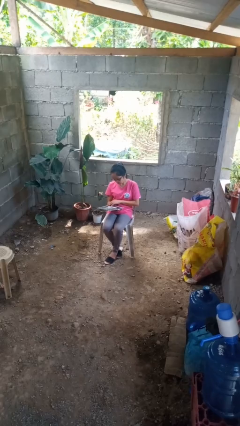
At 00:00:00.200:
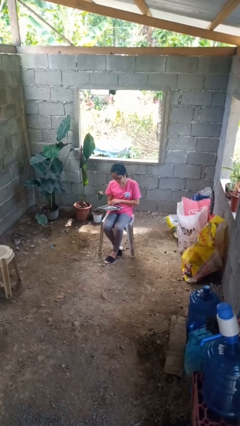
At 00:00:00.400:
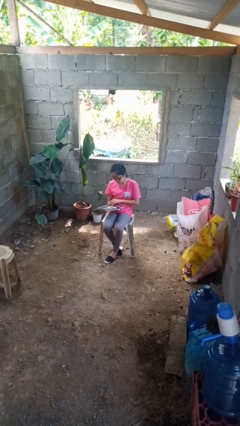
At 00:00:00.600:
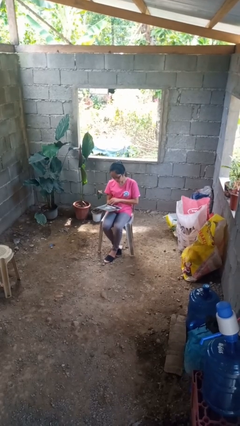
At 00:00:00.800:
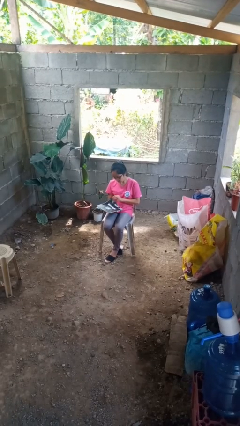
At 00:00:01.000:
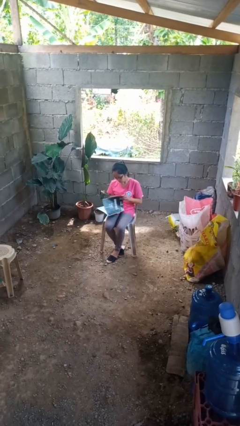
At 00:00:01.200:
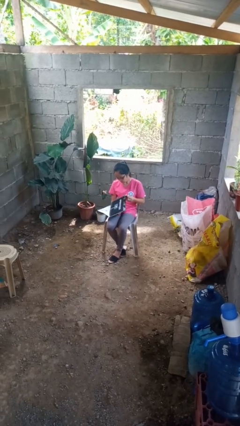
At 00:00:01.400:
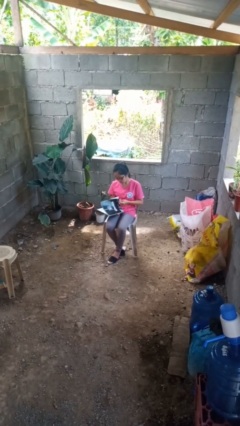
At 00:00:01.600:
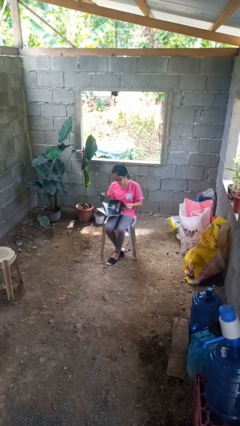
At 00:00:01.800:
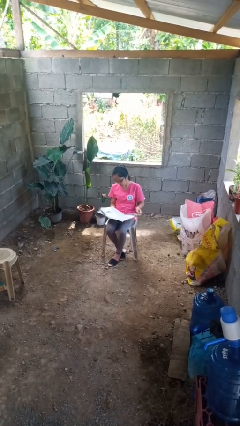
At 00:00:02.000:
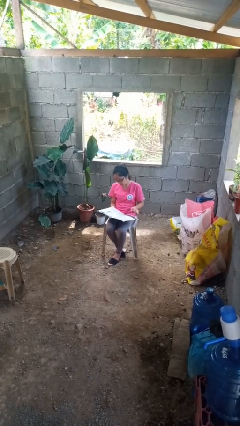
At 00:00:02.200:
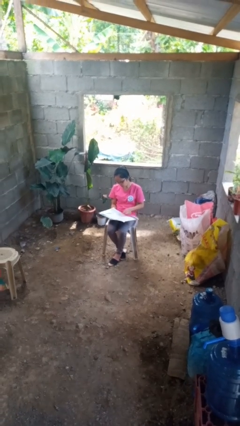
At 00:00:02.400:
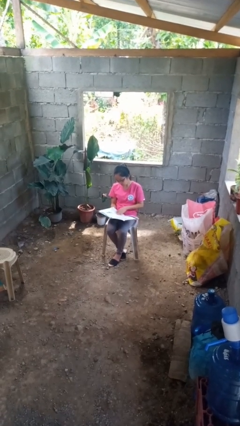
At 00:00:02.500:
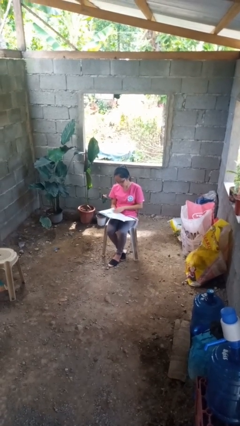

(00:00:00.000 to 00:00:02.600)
person reads magazine

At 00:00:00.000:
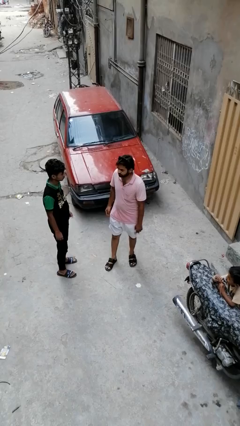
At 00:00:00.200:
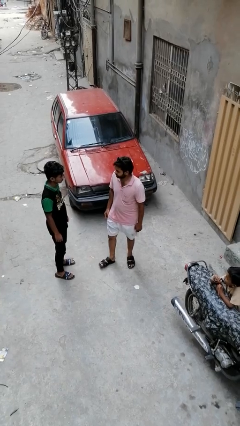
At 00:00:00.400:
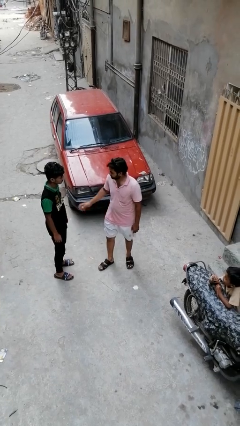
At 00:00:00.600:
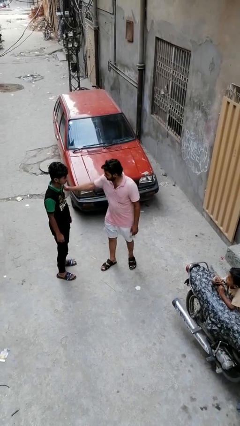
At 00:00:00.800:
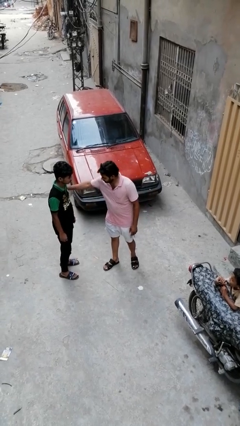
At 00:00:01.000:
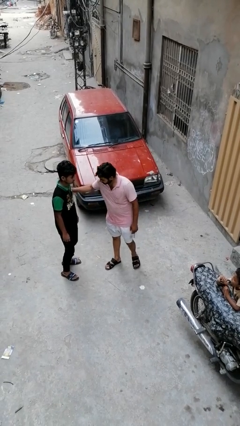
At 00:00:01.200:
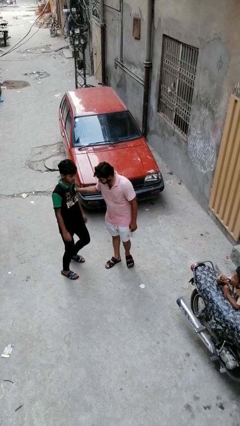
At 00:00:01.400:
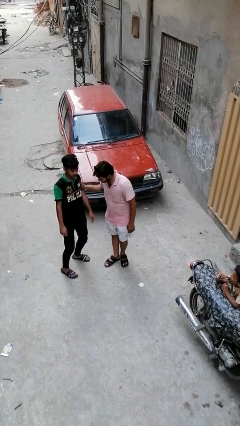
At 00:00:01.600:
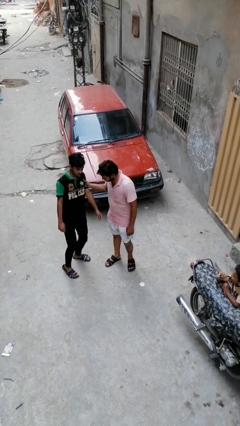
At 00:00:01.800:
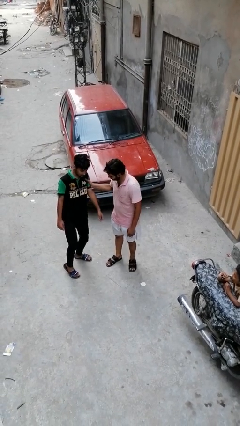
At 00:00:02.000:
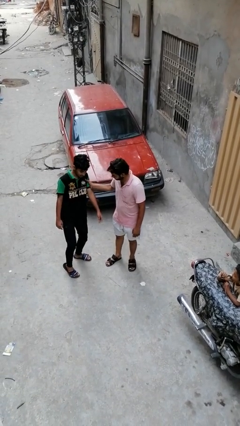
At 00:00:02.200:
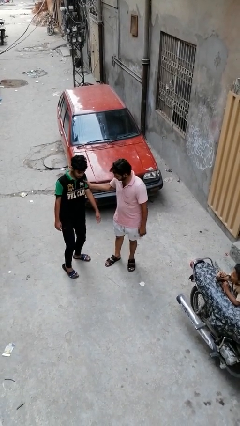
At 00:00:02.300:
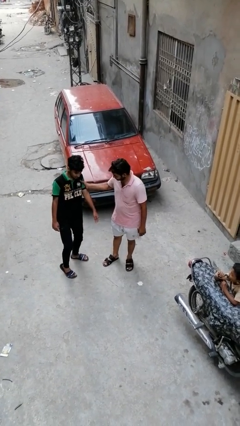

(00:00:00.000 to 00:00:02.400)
person grabs person by bicep

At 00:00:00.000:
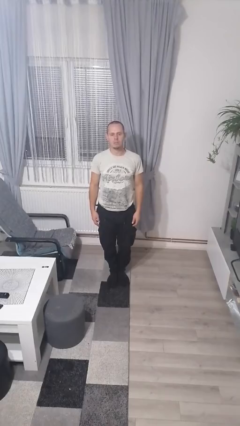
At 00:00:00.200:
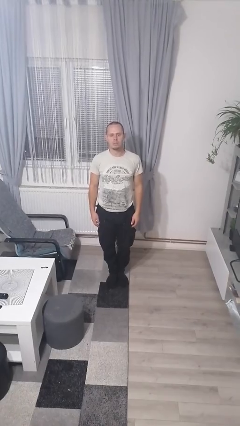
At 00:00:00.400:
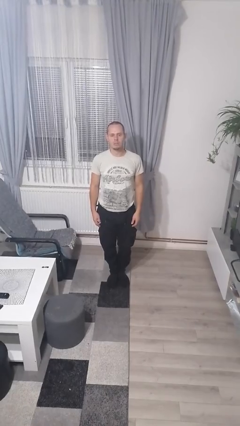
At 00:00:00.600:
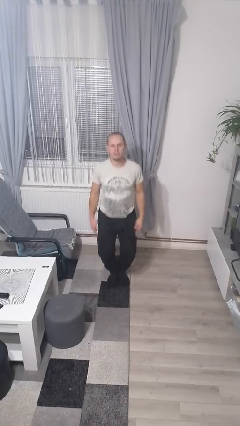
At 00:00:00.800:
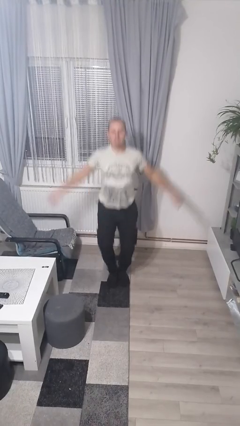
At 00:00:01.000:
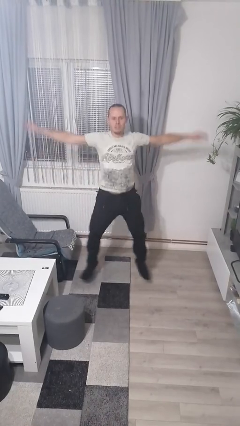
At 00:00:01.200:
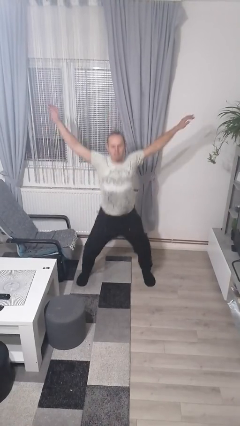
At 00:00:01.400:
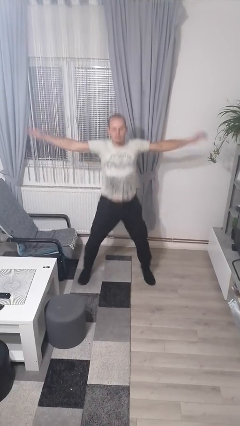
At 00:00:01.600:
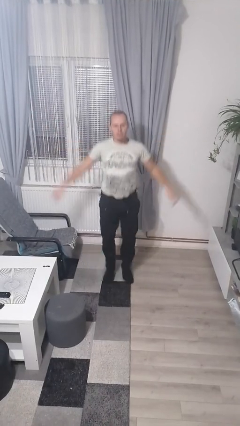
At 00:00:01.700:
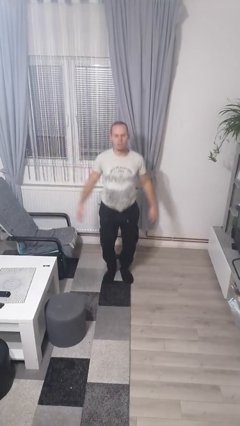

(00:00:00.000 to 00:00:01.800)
person exercises with jumping jacks

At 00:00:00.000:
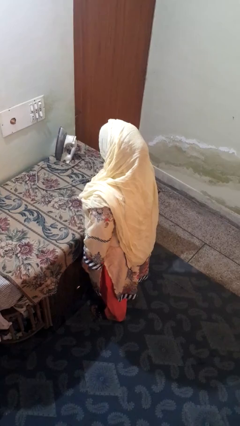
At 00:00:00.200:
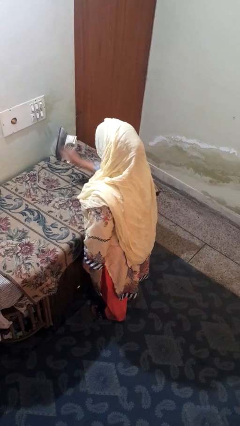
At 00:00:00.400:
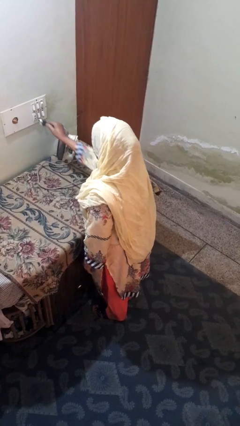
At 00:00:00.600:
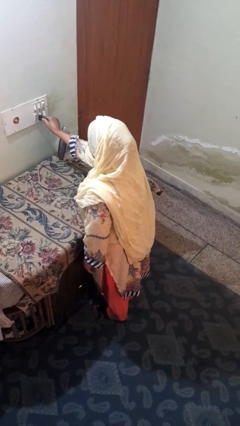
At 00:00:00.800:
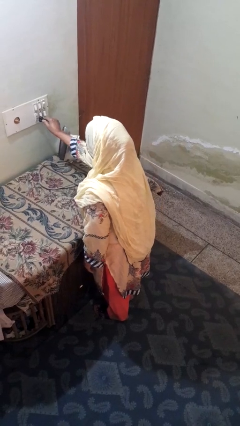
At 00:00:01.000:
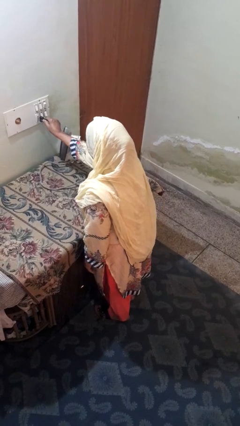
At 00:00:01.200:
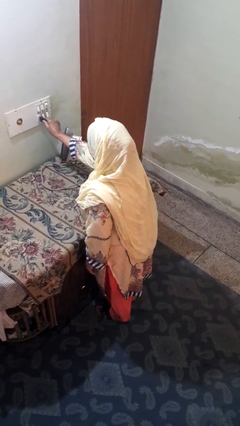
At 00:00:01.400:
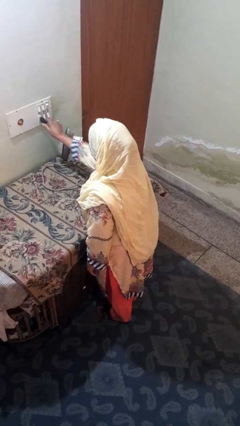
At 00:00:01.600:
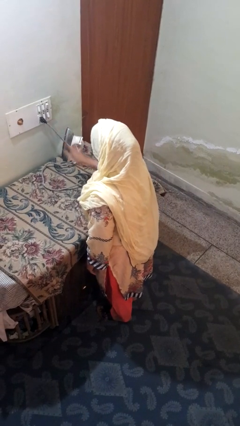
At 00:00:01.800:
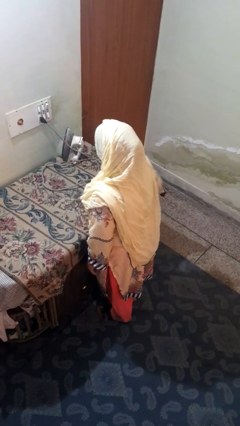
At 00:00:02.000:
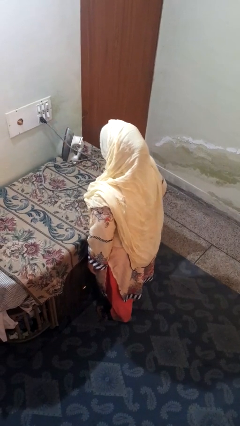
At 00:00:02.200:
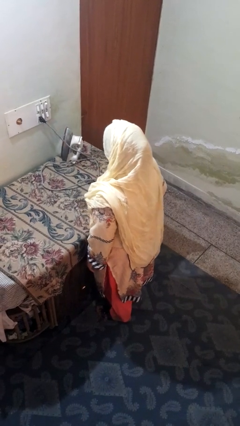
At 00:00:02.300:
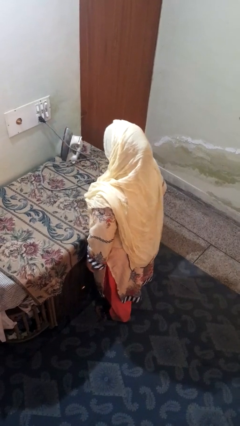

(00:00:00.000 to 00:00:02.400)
person plugs into electrical socket

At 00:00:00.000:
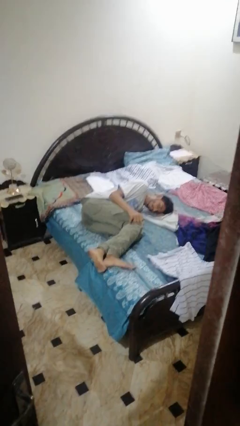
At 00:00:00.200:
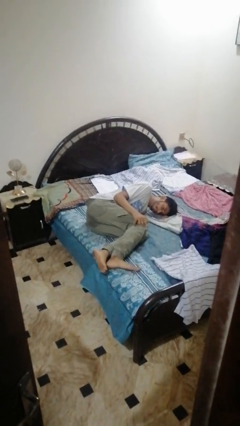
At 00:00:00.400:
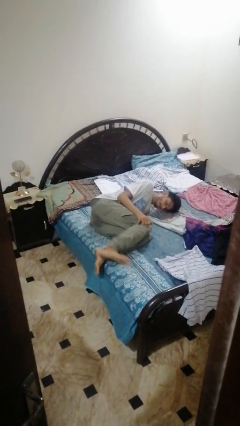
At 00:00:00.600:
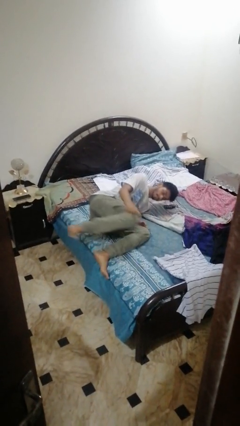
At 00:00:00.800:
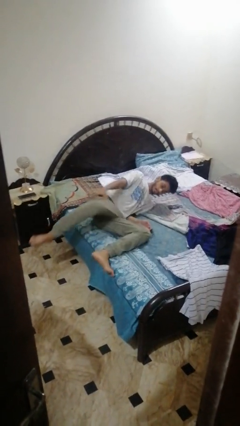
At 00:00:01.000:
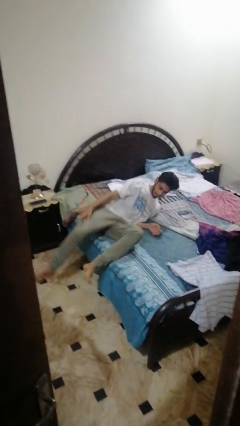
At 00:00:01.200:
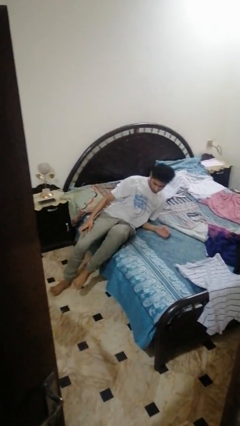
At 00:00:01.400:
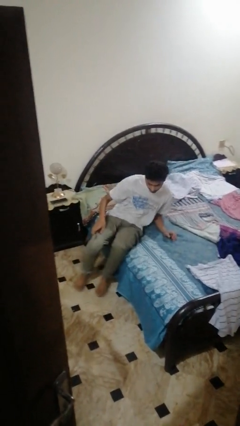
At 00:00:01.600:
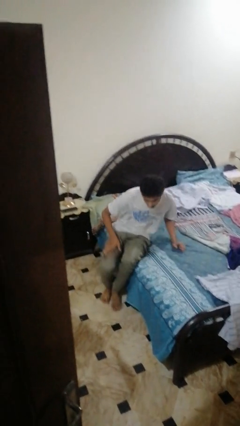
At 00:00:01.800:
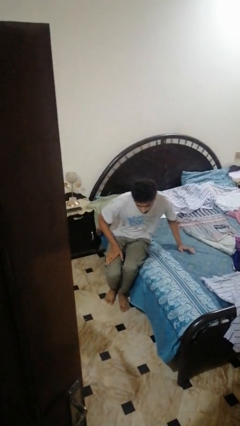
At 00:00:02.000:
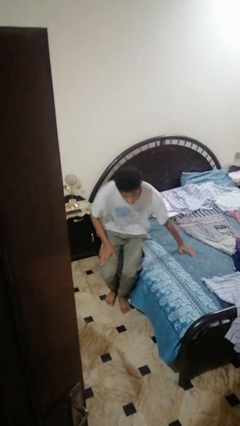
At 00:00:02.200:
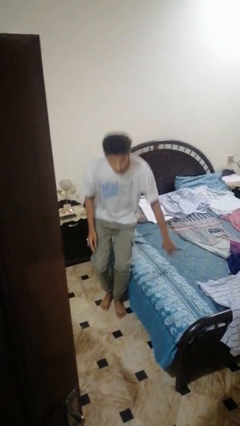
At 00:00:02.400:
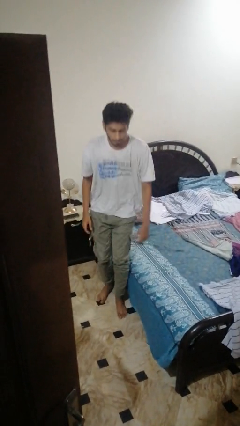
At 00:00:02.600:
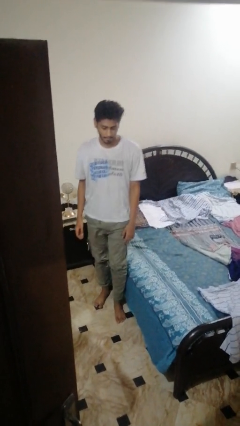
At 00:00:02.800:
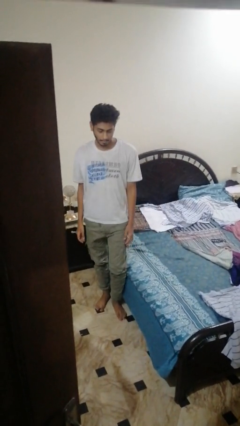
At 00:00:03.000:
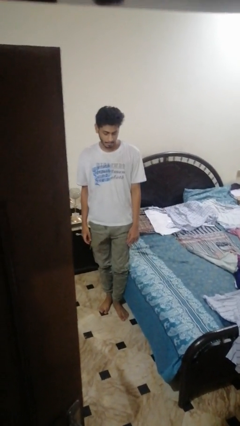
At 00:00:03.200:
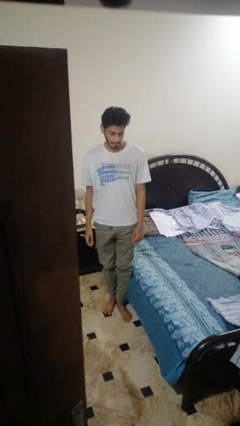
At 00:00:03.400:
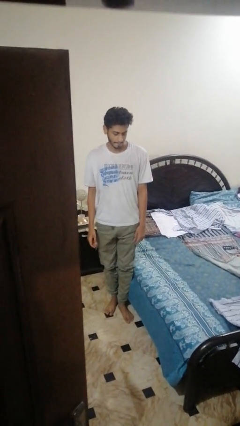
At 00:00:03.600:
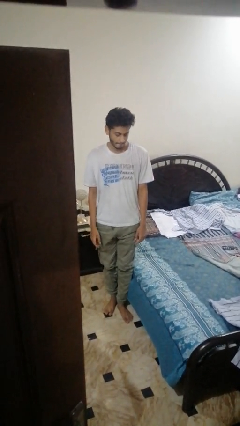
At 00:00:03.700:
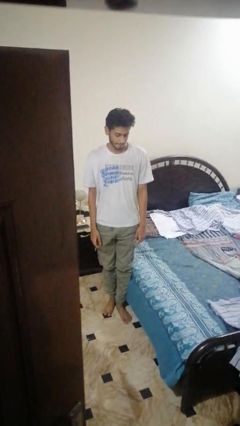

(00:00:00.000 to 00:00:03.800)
person stands up

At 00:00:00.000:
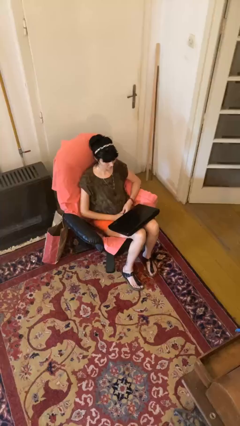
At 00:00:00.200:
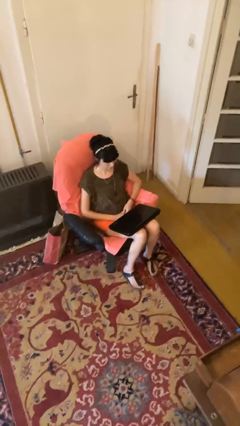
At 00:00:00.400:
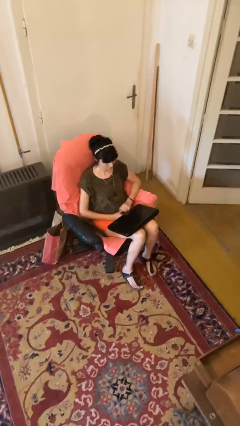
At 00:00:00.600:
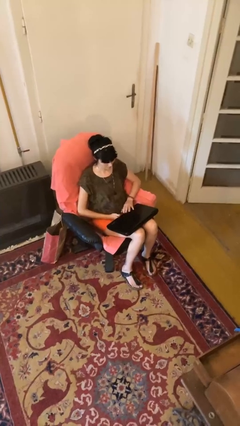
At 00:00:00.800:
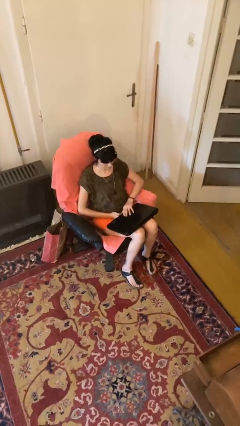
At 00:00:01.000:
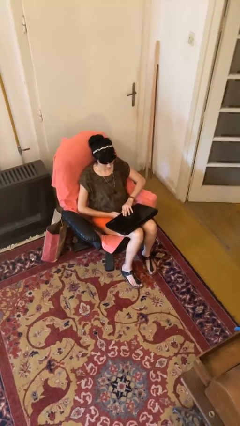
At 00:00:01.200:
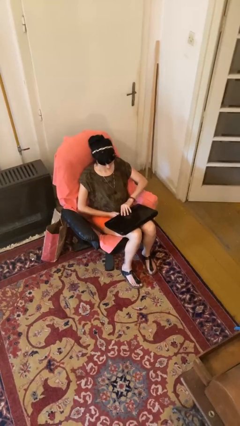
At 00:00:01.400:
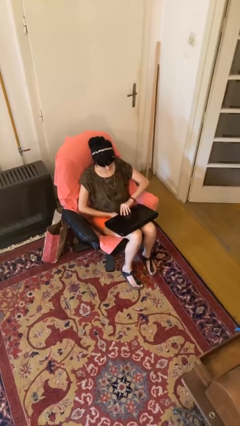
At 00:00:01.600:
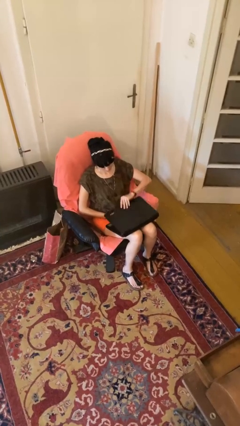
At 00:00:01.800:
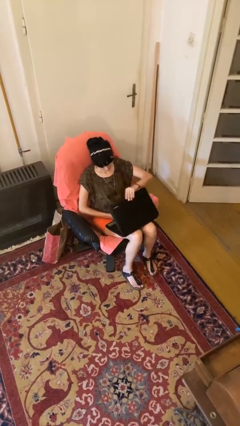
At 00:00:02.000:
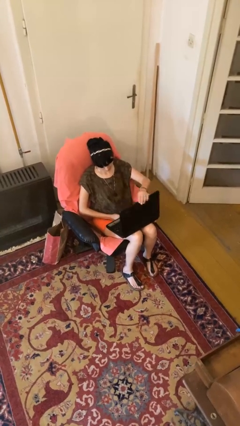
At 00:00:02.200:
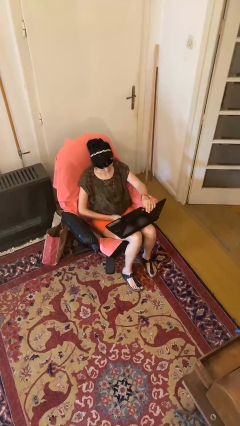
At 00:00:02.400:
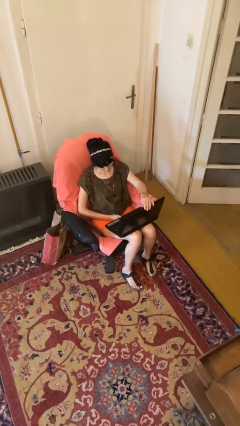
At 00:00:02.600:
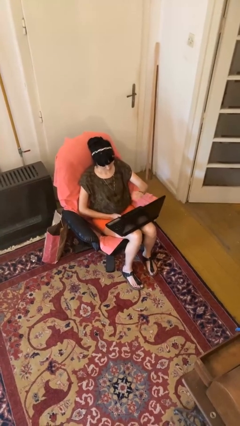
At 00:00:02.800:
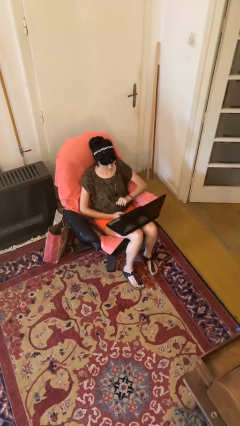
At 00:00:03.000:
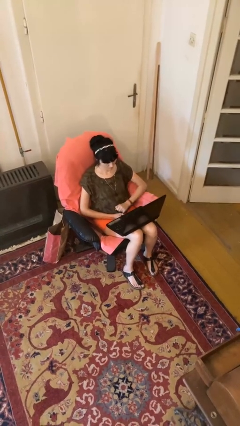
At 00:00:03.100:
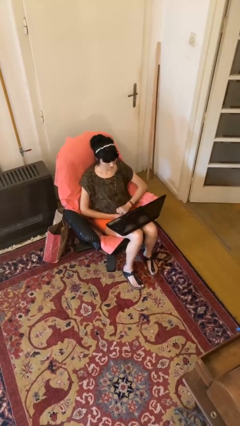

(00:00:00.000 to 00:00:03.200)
person opens laptop

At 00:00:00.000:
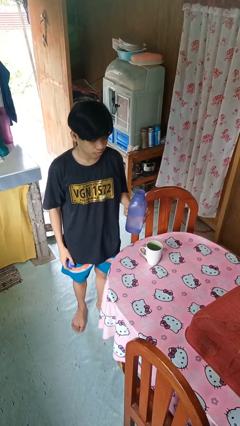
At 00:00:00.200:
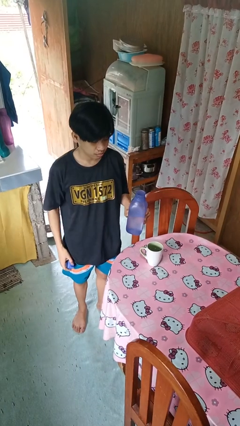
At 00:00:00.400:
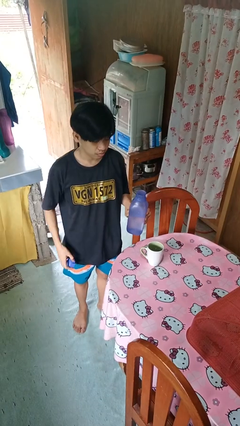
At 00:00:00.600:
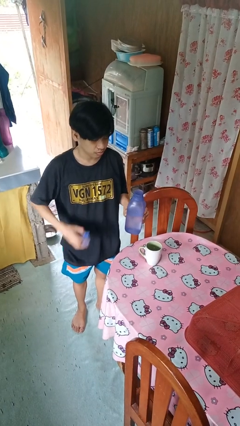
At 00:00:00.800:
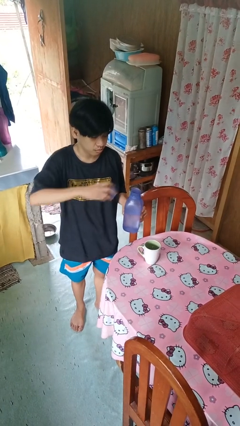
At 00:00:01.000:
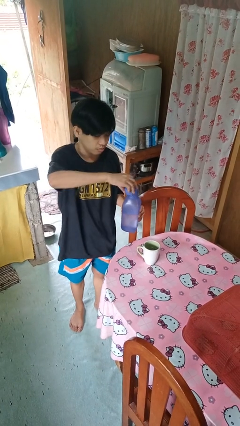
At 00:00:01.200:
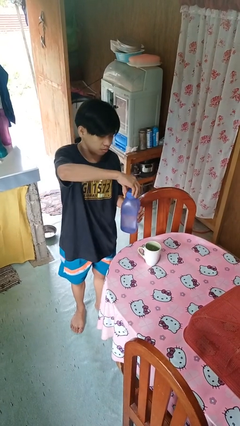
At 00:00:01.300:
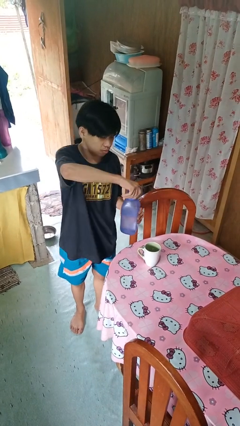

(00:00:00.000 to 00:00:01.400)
person screws lid to bottle
